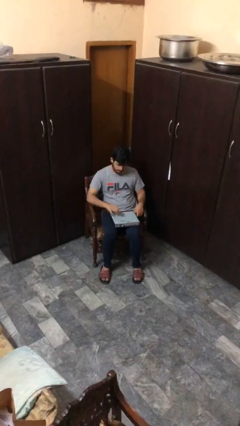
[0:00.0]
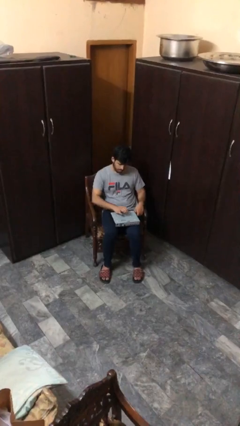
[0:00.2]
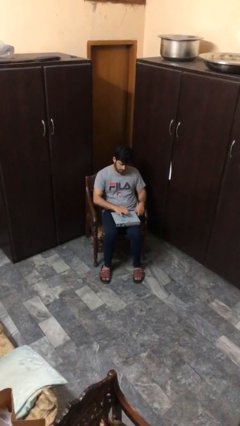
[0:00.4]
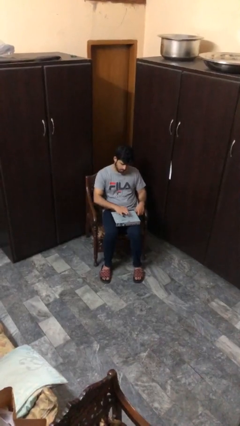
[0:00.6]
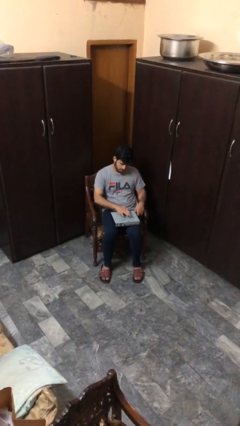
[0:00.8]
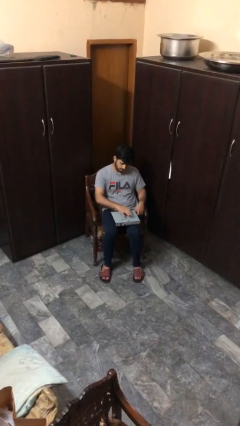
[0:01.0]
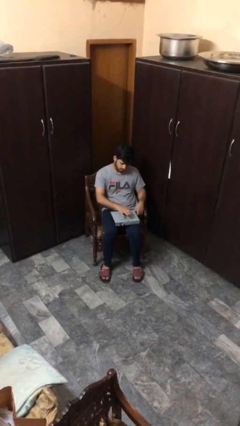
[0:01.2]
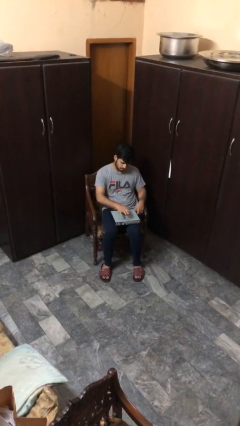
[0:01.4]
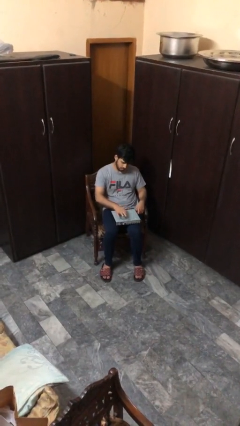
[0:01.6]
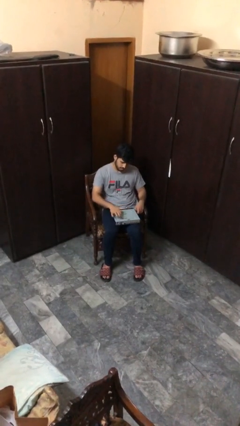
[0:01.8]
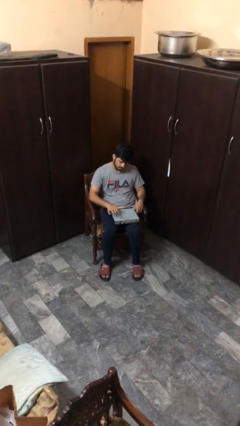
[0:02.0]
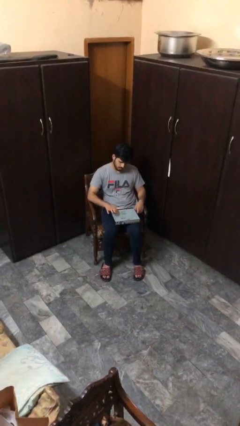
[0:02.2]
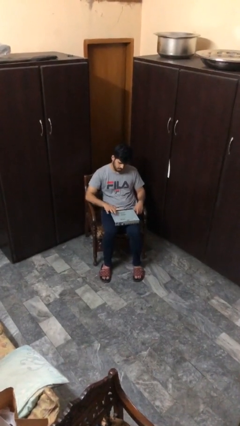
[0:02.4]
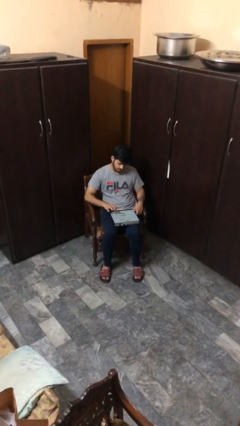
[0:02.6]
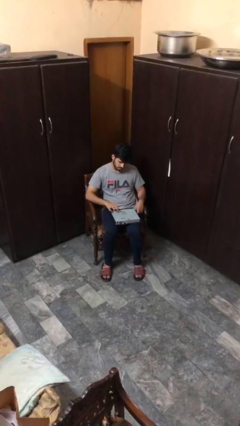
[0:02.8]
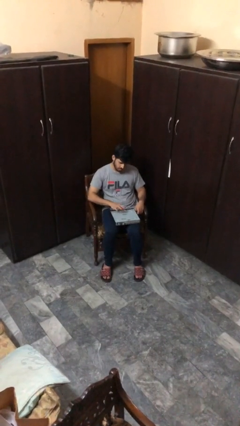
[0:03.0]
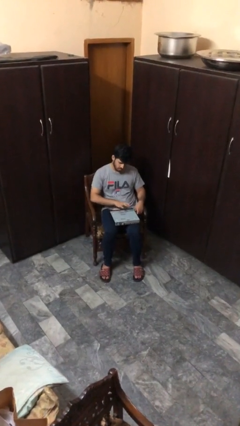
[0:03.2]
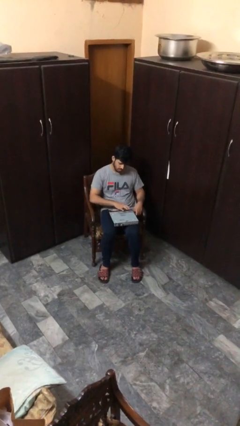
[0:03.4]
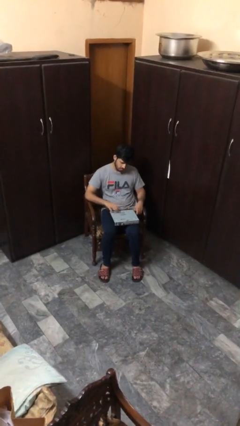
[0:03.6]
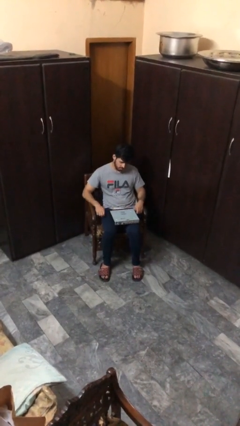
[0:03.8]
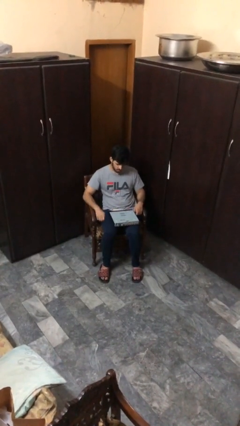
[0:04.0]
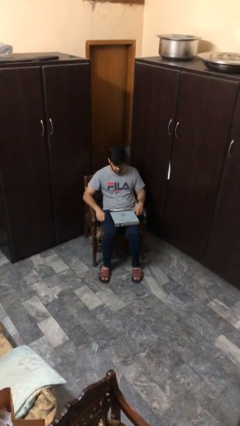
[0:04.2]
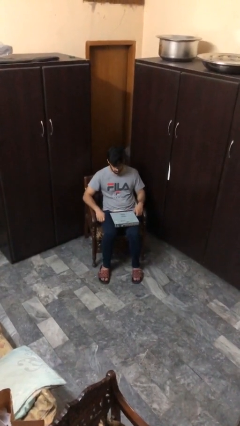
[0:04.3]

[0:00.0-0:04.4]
person taps object with finger

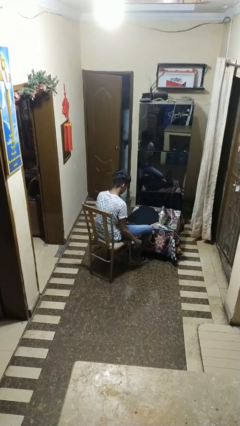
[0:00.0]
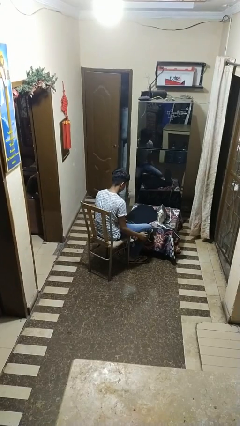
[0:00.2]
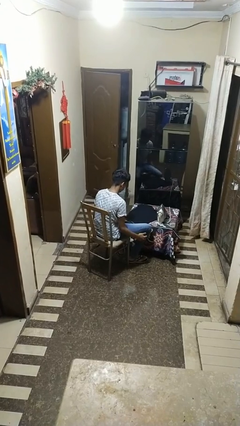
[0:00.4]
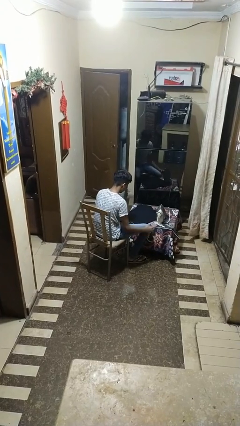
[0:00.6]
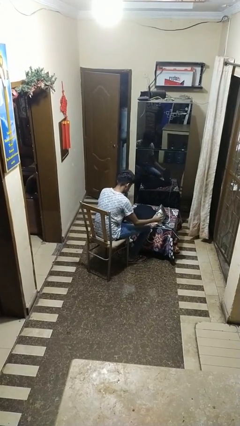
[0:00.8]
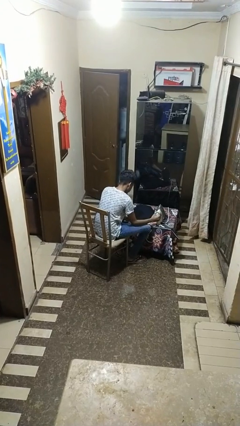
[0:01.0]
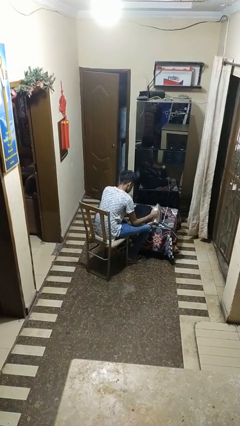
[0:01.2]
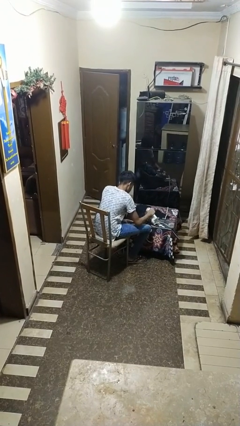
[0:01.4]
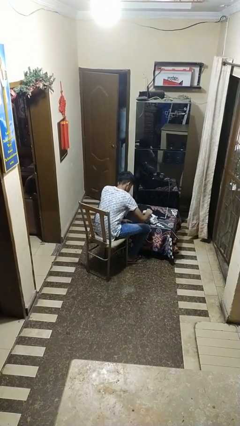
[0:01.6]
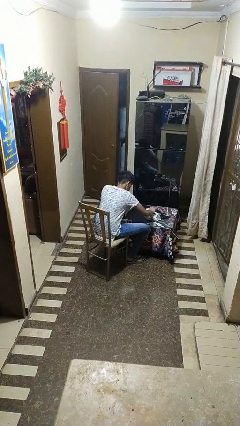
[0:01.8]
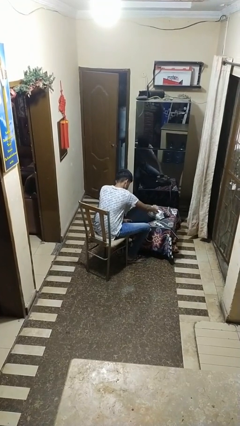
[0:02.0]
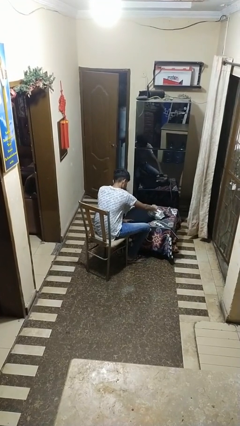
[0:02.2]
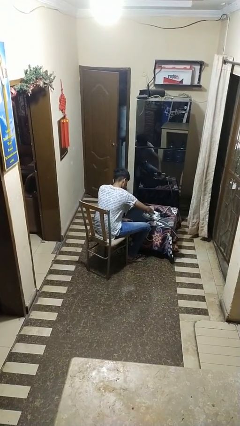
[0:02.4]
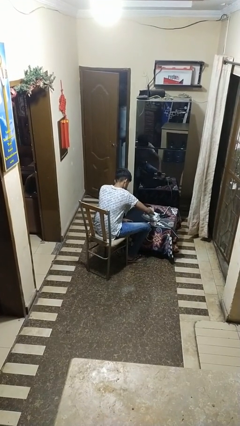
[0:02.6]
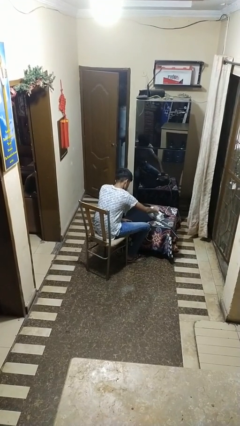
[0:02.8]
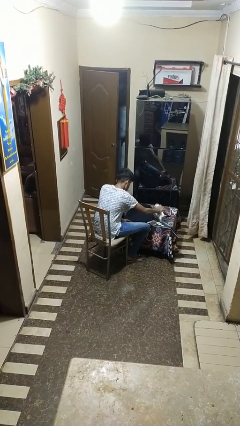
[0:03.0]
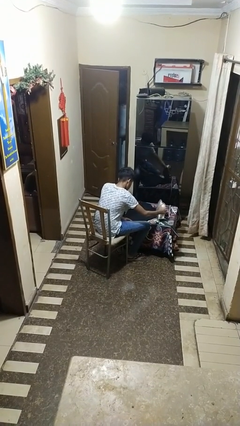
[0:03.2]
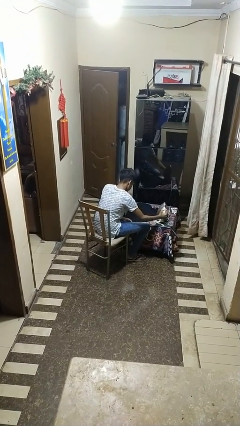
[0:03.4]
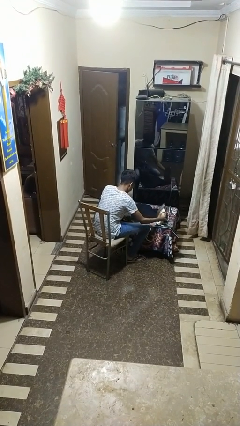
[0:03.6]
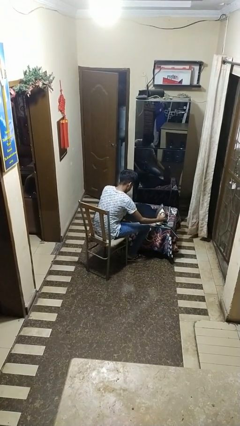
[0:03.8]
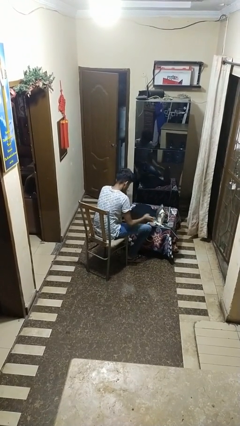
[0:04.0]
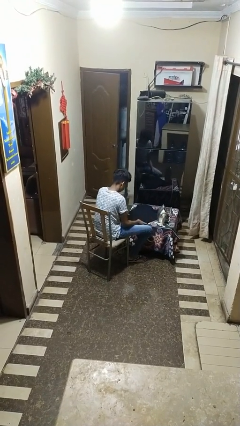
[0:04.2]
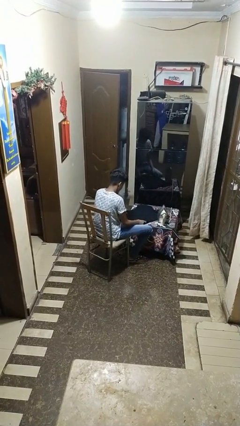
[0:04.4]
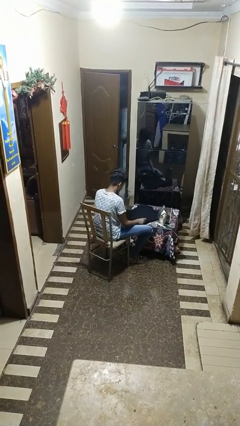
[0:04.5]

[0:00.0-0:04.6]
person irons clothes

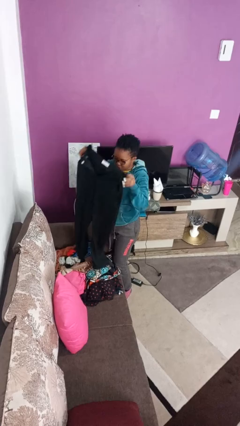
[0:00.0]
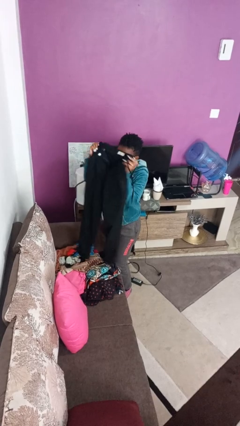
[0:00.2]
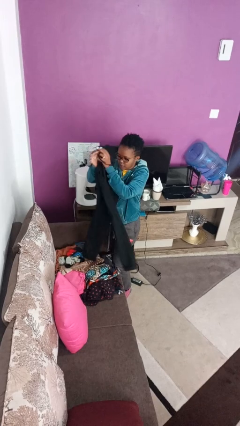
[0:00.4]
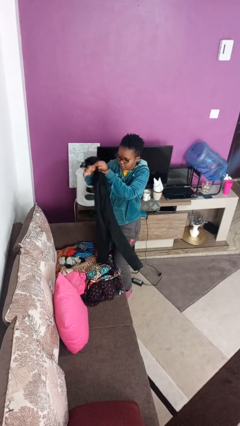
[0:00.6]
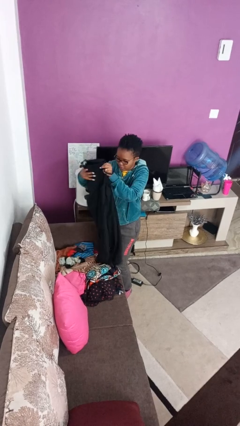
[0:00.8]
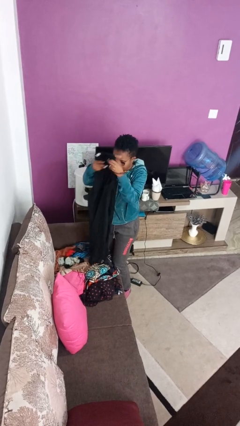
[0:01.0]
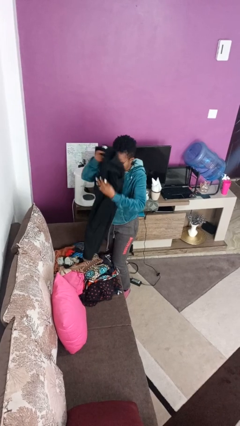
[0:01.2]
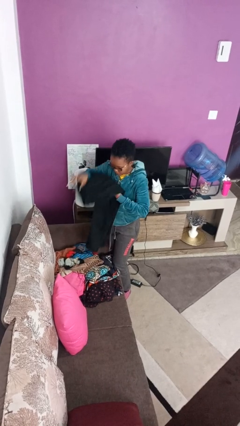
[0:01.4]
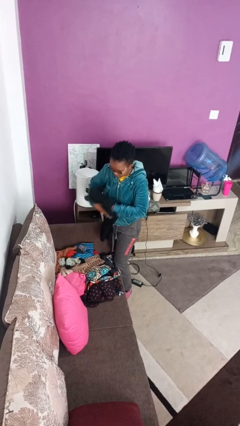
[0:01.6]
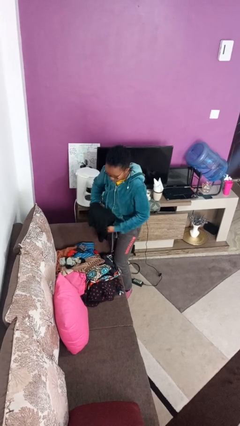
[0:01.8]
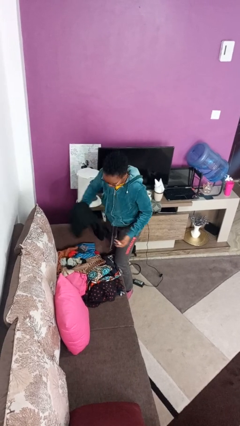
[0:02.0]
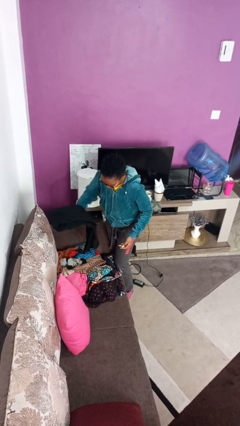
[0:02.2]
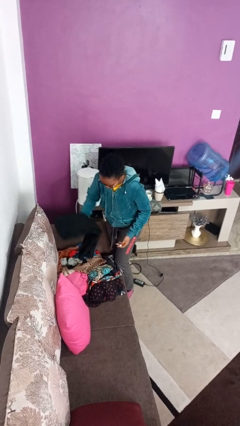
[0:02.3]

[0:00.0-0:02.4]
person folds pants

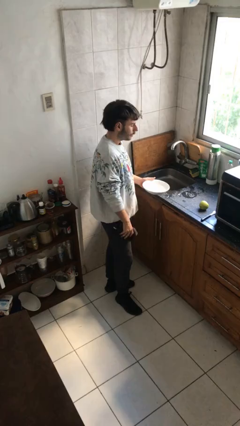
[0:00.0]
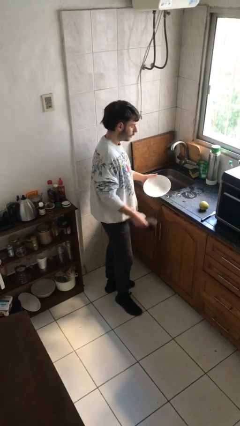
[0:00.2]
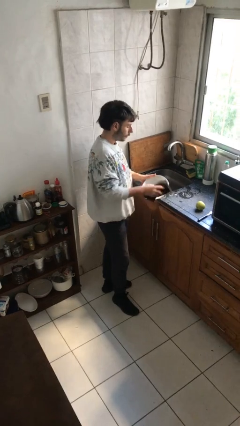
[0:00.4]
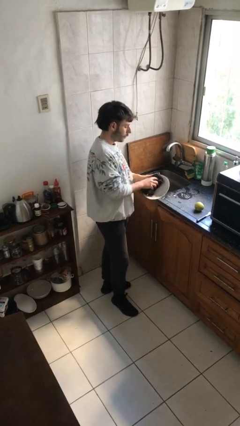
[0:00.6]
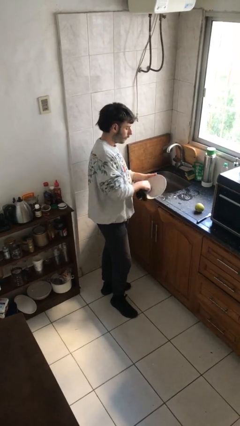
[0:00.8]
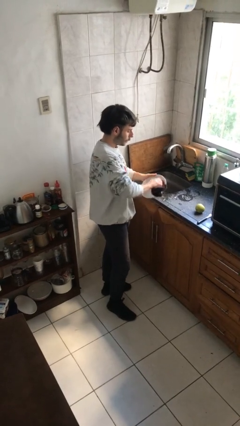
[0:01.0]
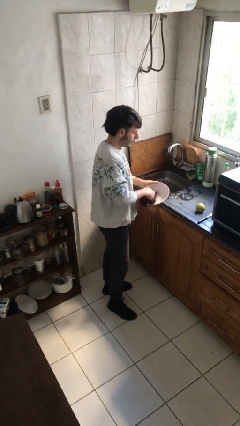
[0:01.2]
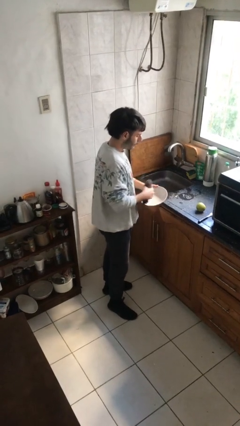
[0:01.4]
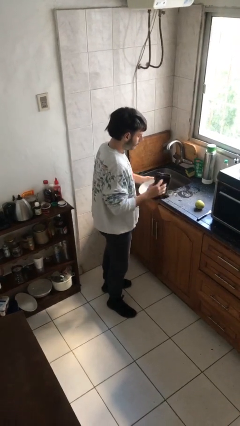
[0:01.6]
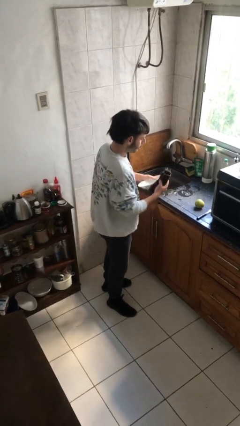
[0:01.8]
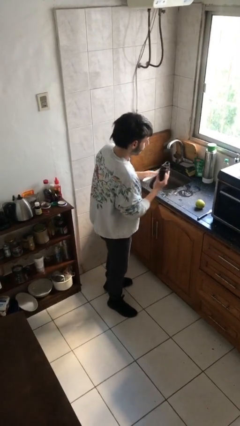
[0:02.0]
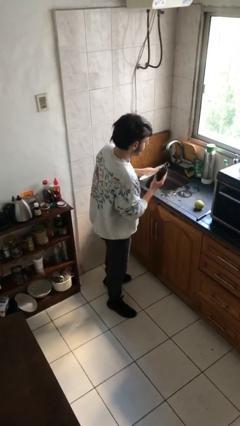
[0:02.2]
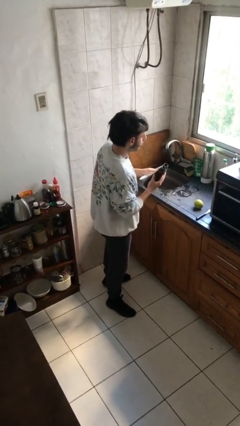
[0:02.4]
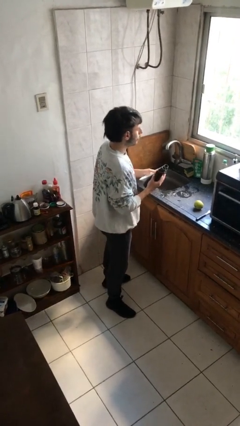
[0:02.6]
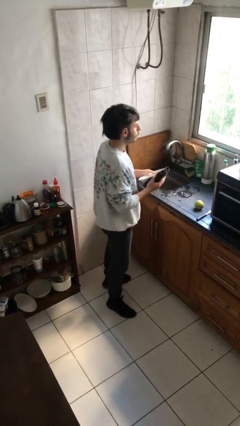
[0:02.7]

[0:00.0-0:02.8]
person dries dish

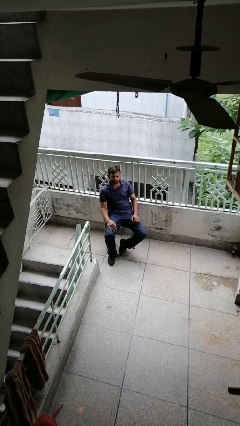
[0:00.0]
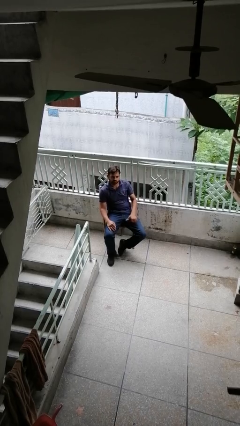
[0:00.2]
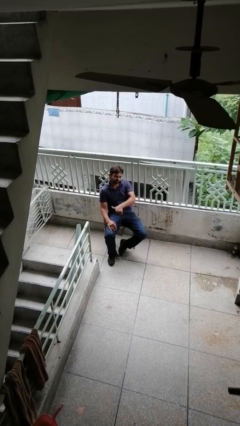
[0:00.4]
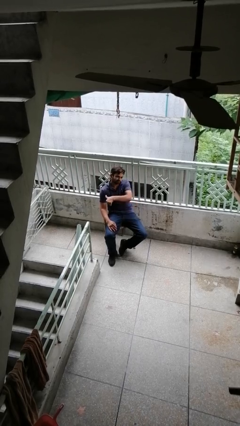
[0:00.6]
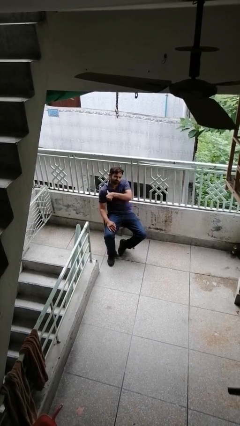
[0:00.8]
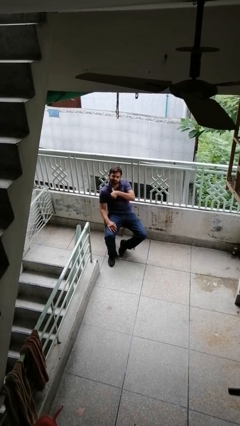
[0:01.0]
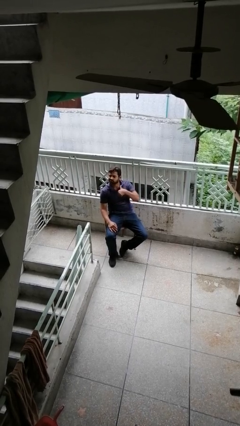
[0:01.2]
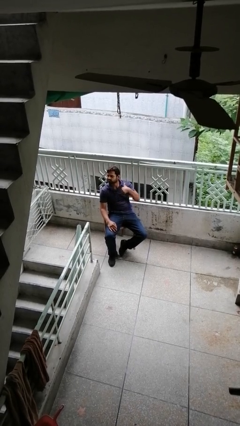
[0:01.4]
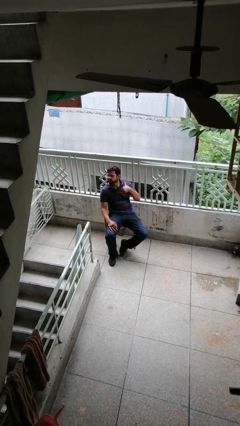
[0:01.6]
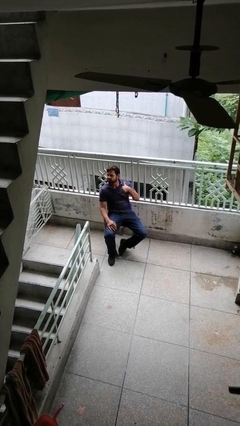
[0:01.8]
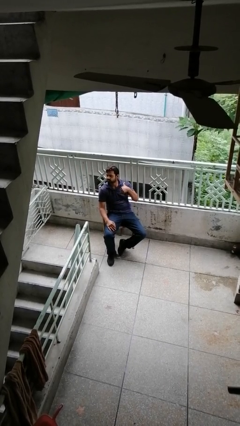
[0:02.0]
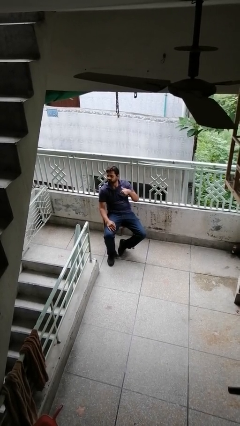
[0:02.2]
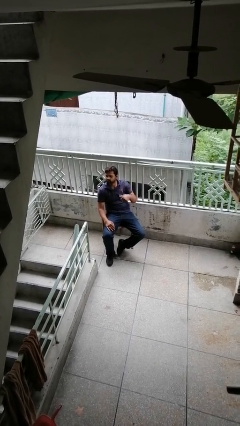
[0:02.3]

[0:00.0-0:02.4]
person gestures cut

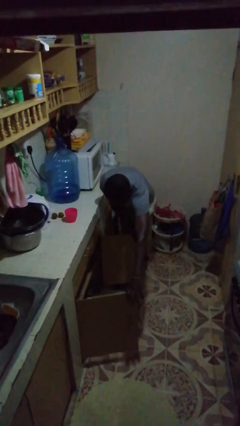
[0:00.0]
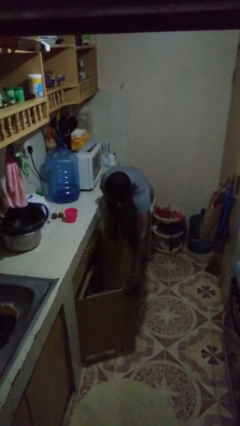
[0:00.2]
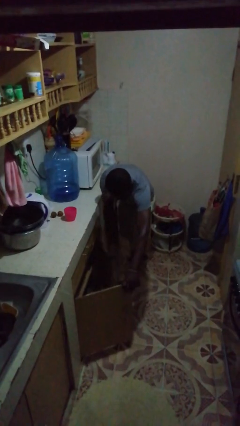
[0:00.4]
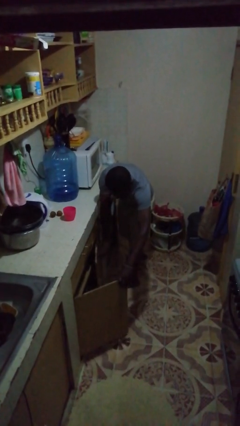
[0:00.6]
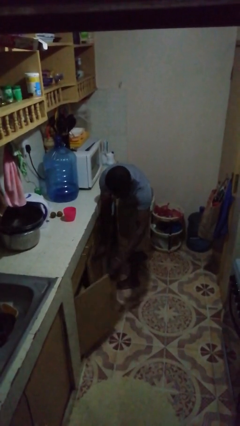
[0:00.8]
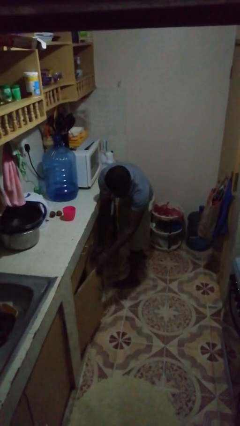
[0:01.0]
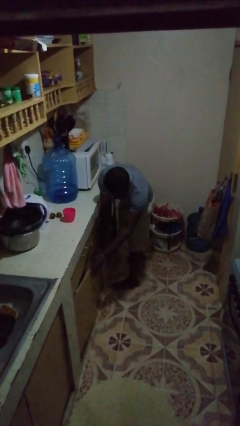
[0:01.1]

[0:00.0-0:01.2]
person closes cabinet
